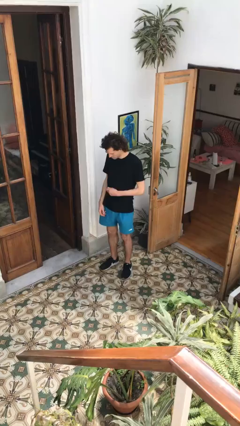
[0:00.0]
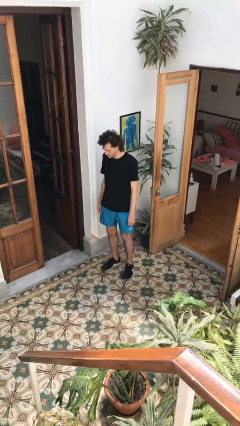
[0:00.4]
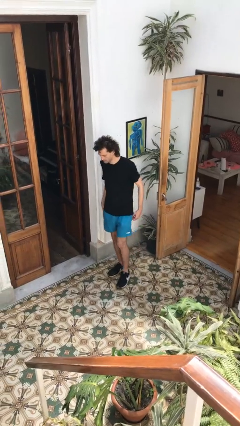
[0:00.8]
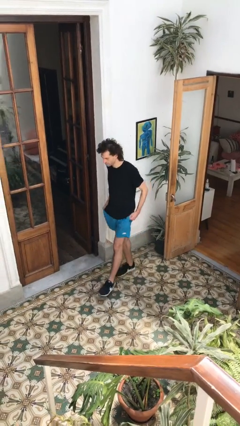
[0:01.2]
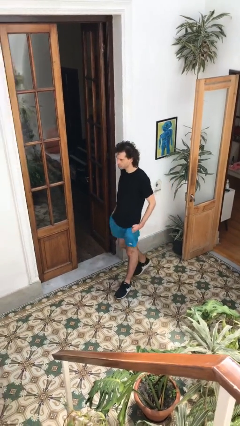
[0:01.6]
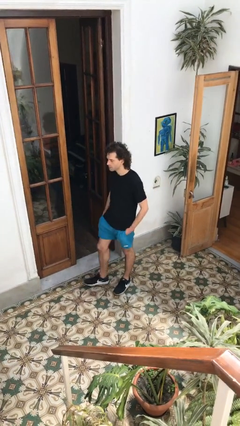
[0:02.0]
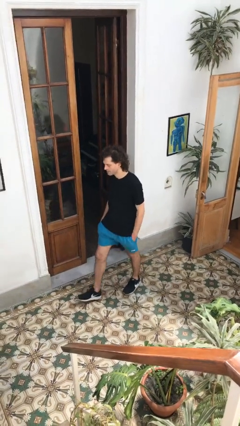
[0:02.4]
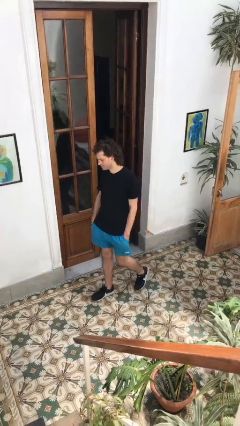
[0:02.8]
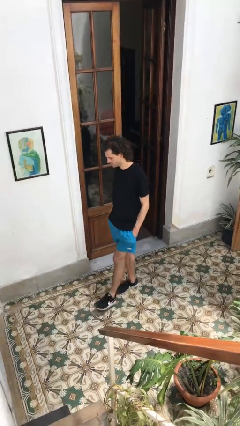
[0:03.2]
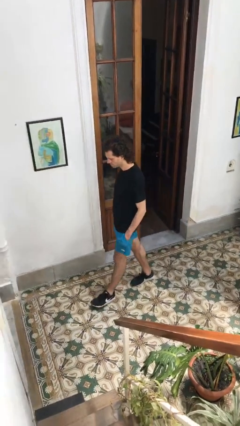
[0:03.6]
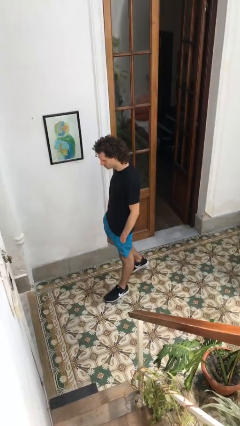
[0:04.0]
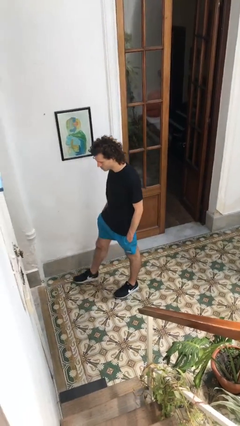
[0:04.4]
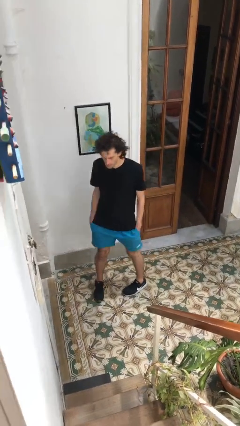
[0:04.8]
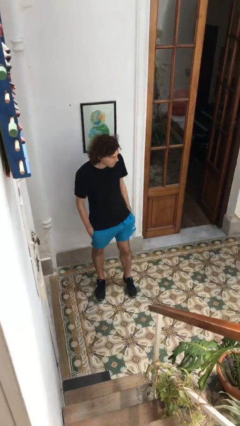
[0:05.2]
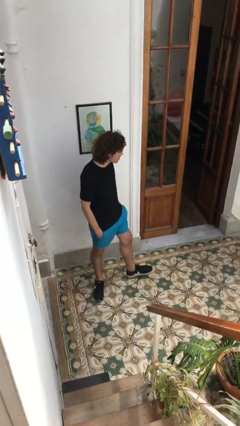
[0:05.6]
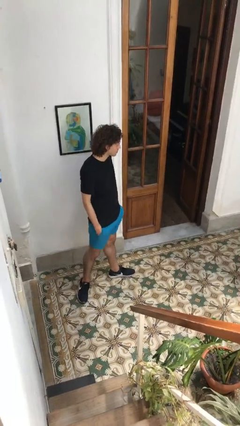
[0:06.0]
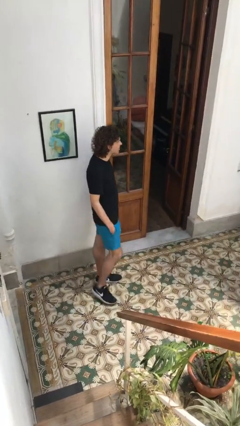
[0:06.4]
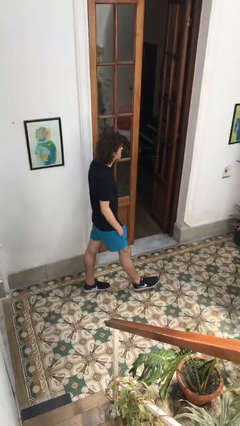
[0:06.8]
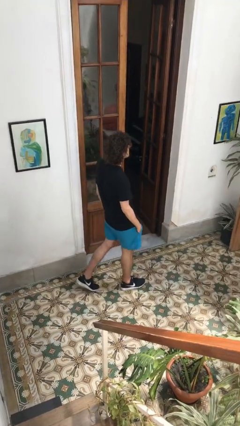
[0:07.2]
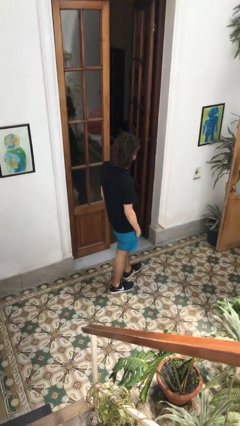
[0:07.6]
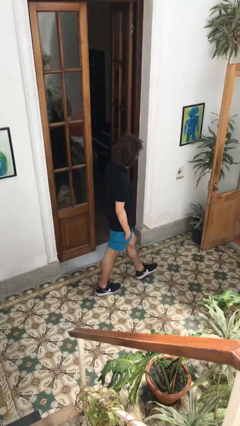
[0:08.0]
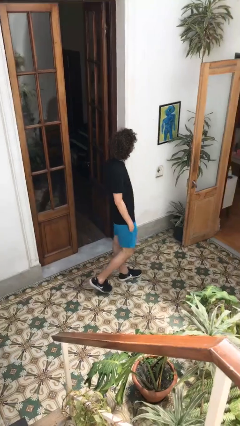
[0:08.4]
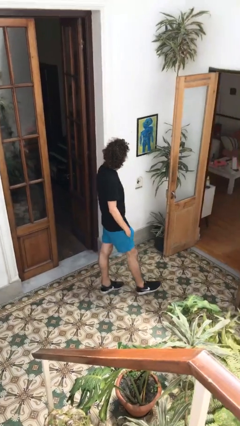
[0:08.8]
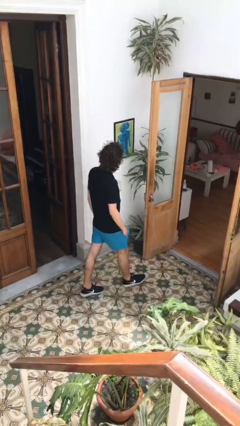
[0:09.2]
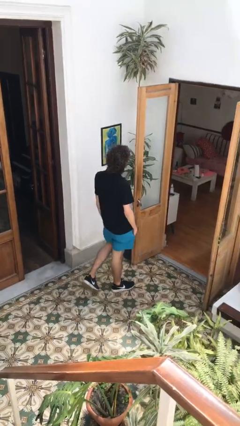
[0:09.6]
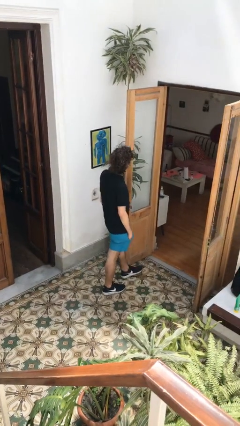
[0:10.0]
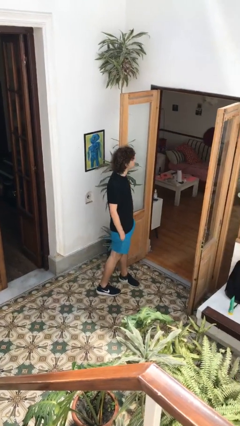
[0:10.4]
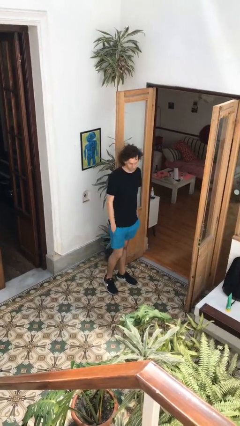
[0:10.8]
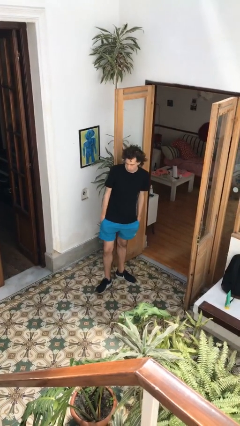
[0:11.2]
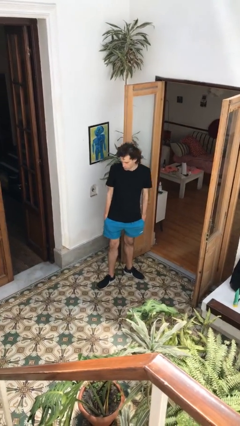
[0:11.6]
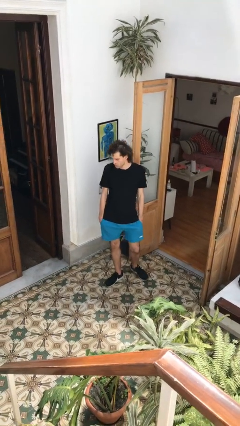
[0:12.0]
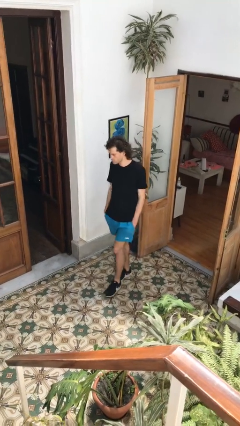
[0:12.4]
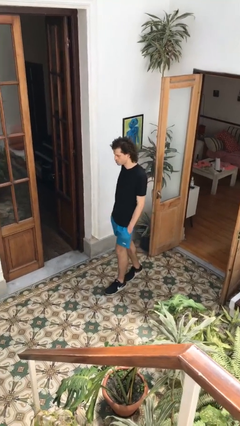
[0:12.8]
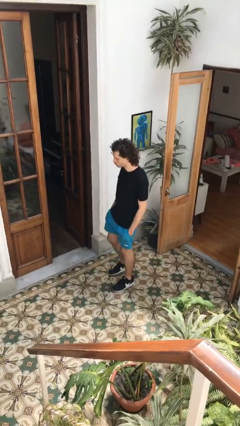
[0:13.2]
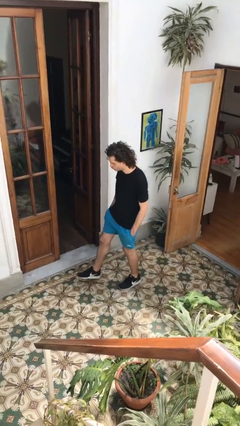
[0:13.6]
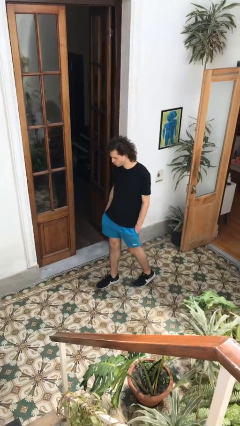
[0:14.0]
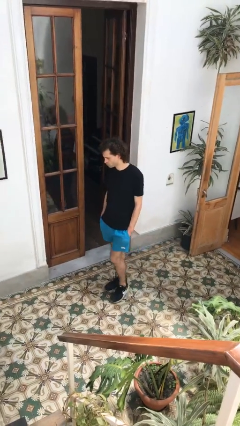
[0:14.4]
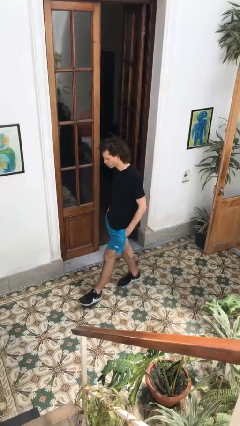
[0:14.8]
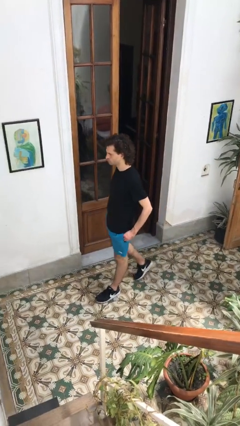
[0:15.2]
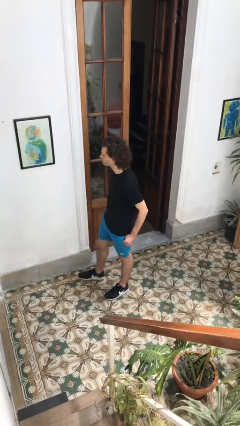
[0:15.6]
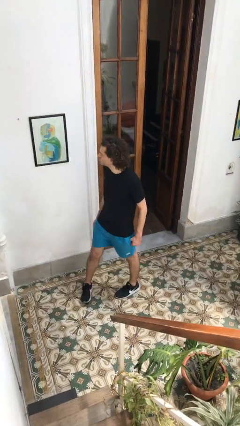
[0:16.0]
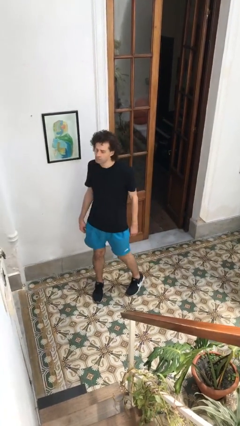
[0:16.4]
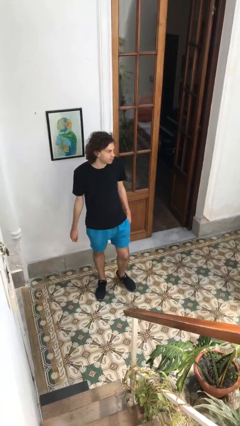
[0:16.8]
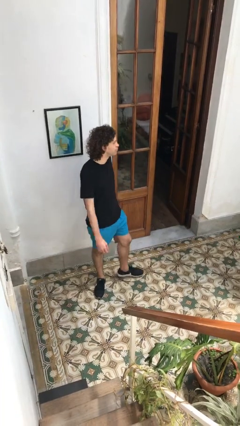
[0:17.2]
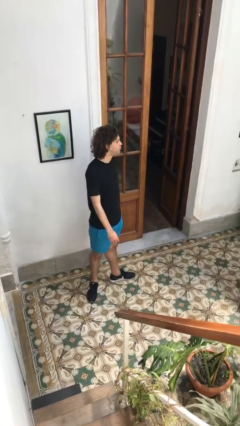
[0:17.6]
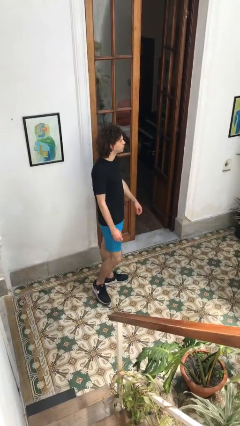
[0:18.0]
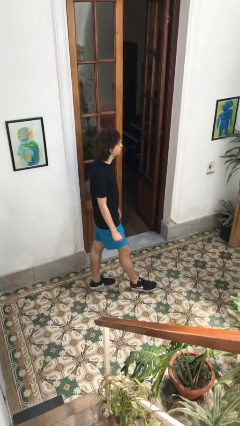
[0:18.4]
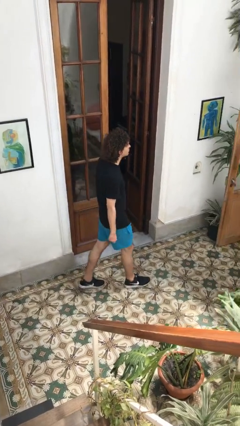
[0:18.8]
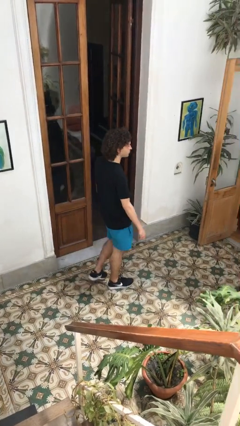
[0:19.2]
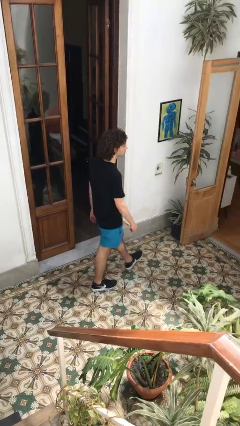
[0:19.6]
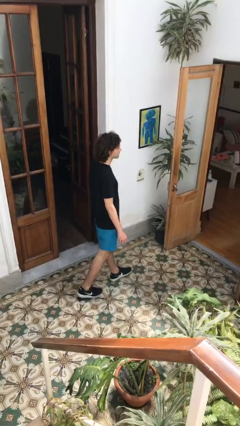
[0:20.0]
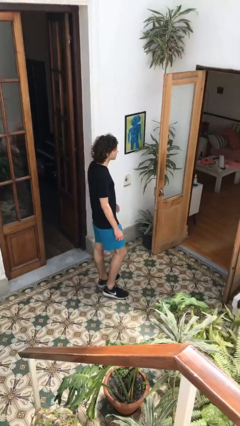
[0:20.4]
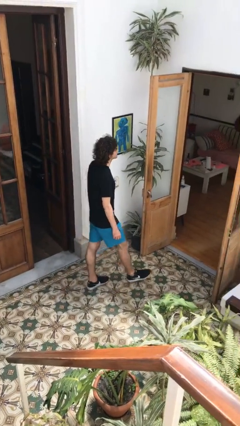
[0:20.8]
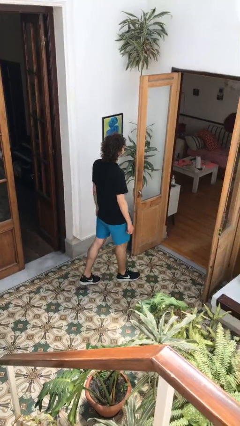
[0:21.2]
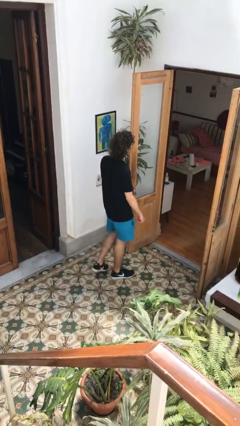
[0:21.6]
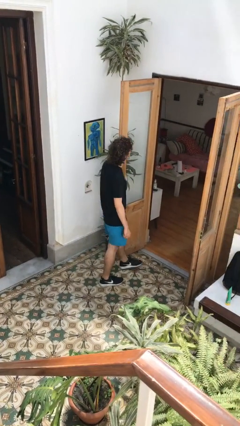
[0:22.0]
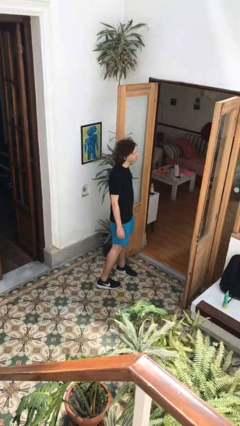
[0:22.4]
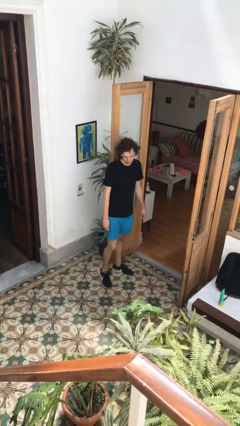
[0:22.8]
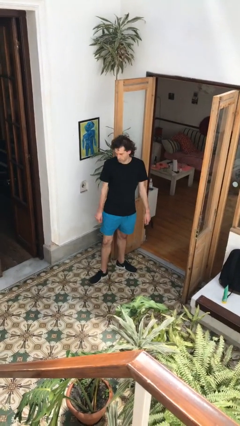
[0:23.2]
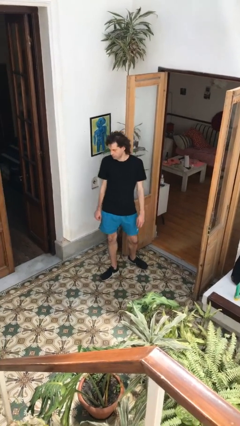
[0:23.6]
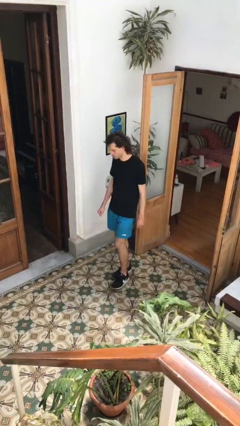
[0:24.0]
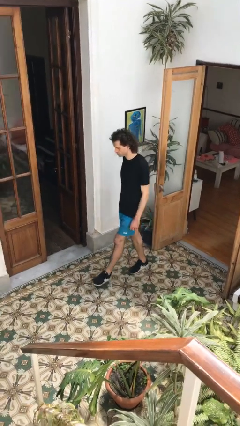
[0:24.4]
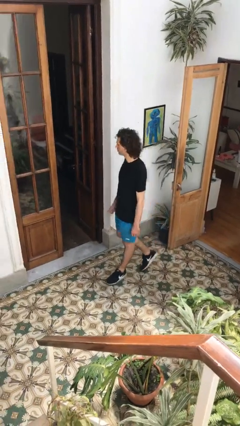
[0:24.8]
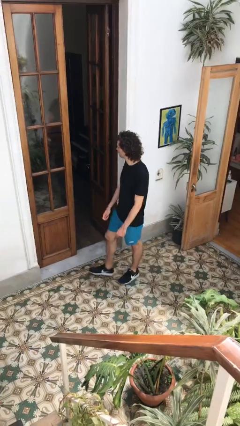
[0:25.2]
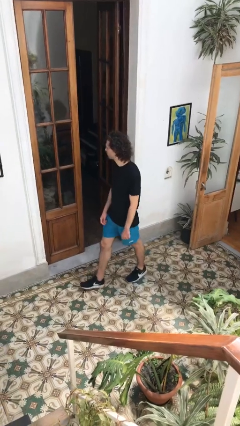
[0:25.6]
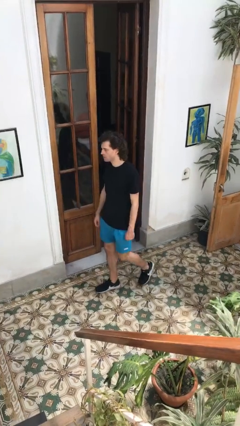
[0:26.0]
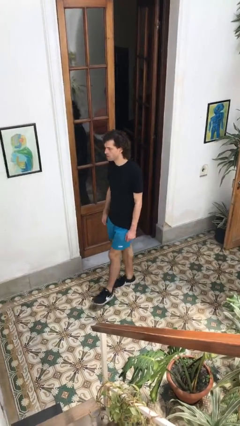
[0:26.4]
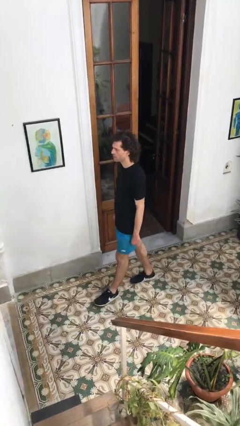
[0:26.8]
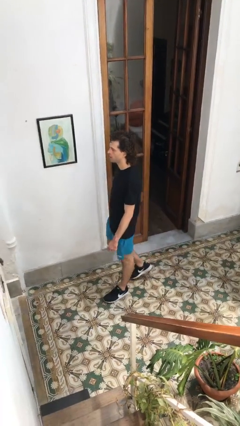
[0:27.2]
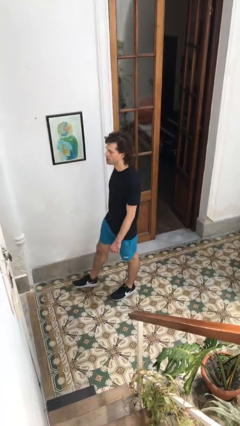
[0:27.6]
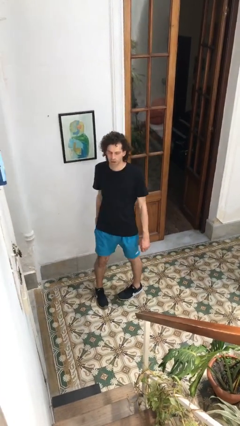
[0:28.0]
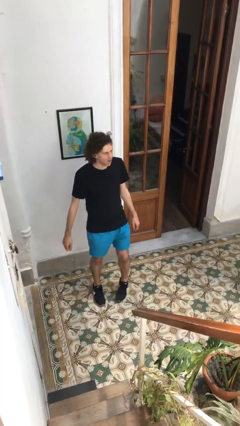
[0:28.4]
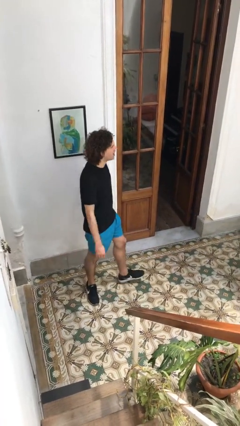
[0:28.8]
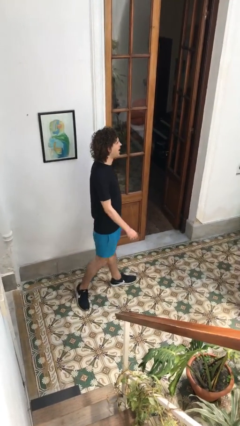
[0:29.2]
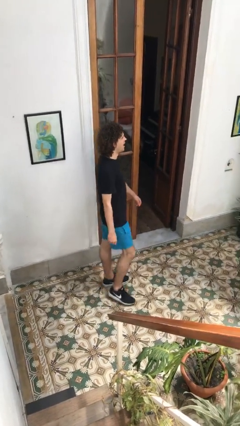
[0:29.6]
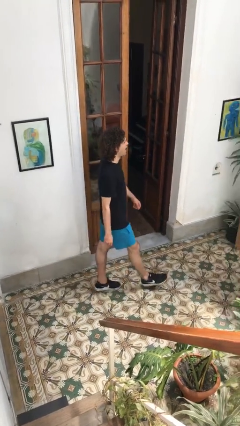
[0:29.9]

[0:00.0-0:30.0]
person walks

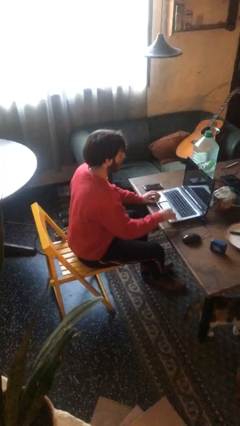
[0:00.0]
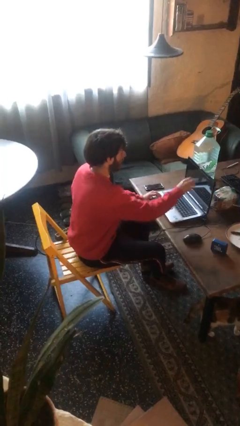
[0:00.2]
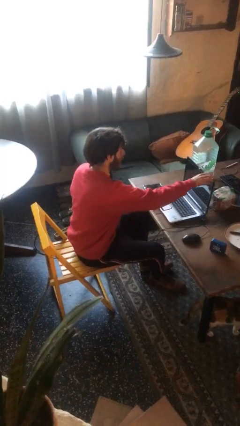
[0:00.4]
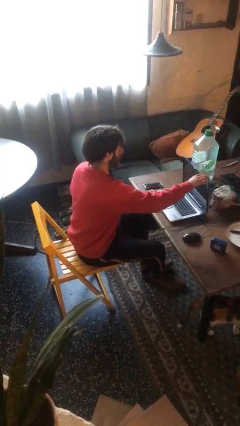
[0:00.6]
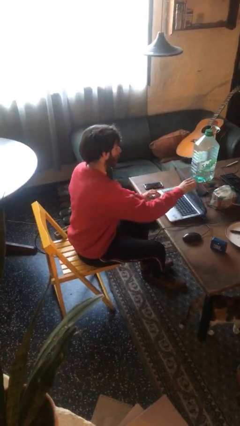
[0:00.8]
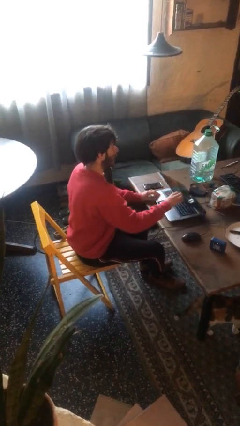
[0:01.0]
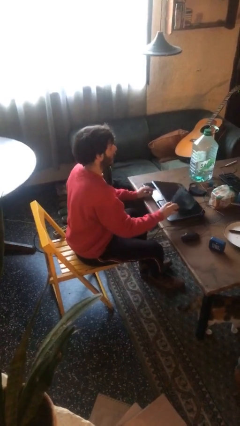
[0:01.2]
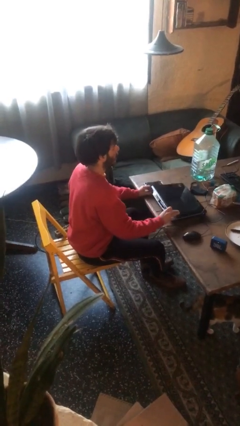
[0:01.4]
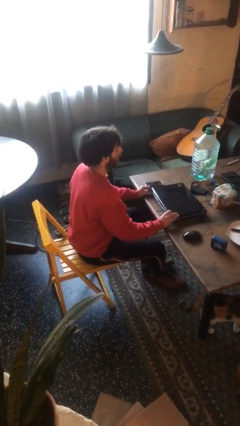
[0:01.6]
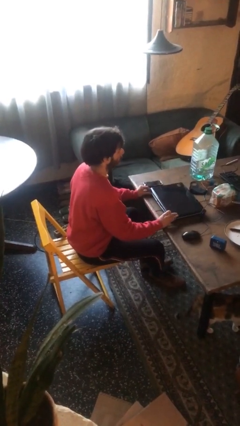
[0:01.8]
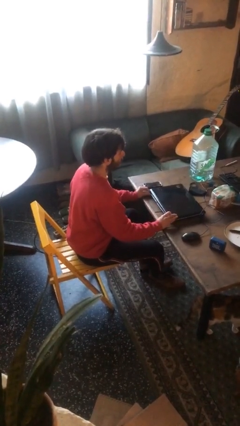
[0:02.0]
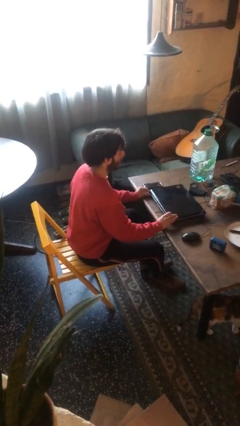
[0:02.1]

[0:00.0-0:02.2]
person closes laptop

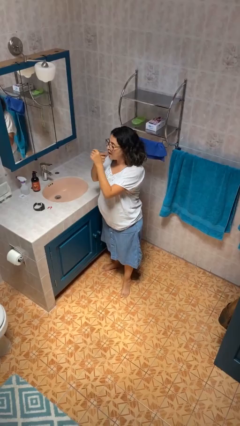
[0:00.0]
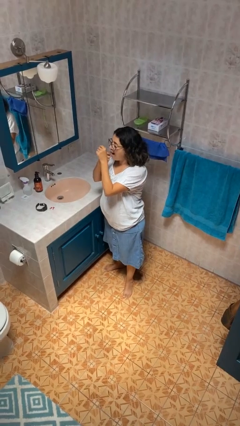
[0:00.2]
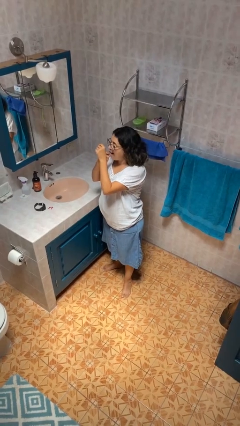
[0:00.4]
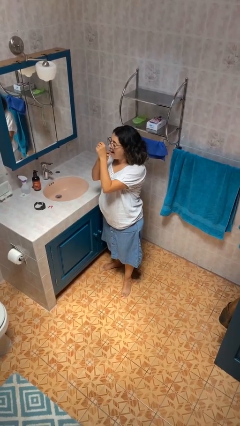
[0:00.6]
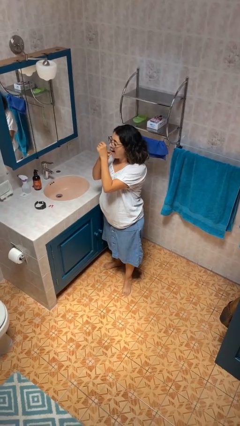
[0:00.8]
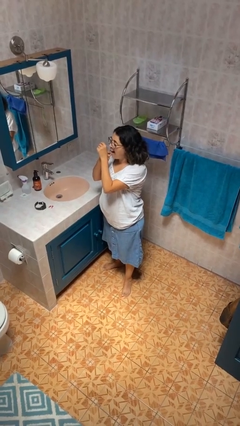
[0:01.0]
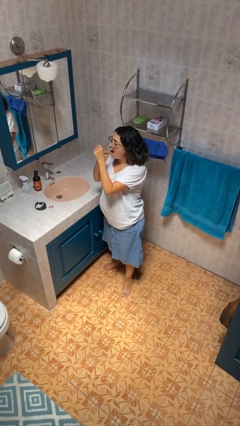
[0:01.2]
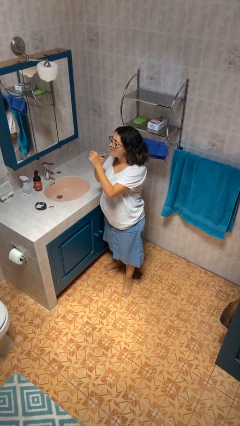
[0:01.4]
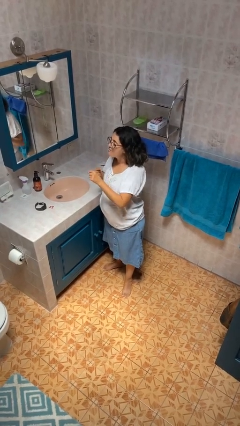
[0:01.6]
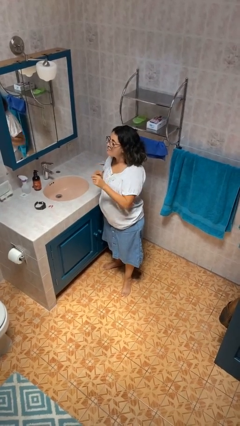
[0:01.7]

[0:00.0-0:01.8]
person flosses
